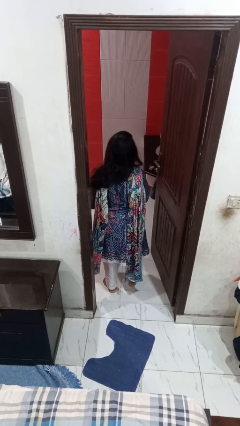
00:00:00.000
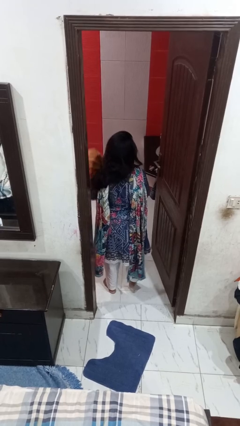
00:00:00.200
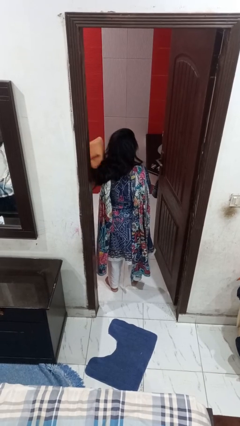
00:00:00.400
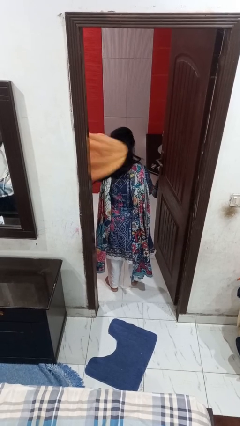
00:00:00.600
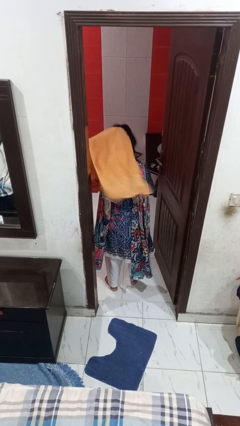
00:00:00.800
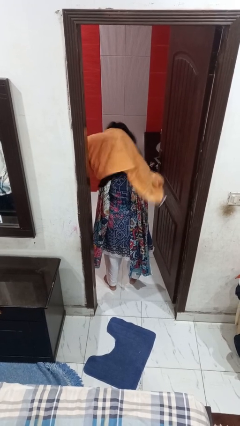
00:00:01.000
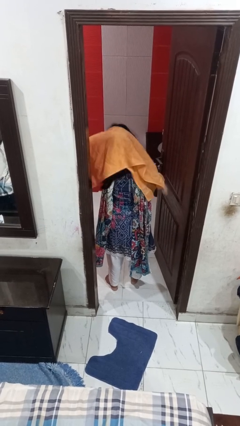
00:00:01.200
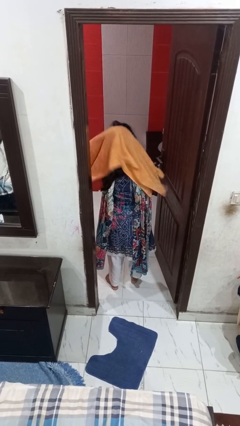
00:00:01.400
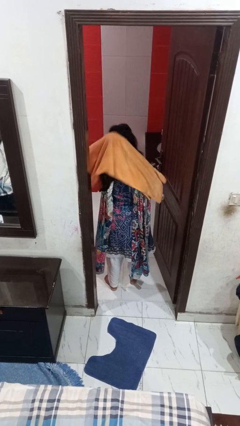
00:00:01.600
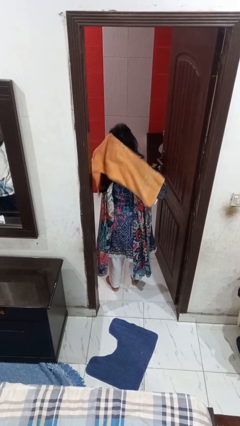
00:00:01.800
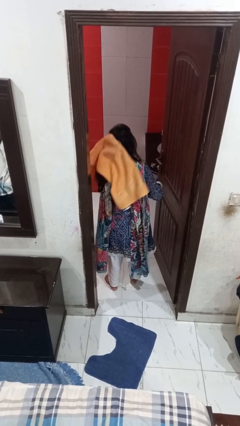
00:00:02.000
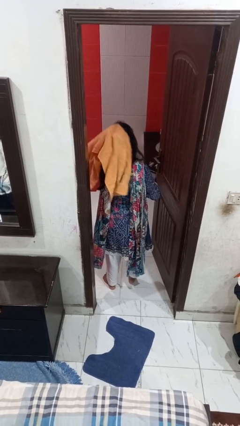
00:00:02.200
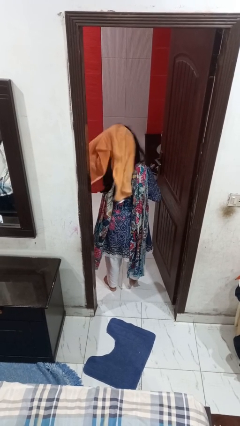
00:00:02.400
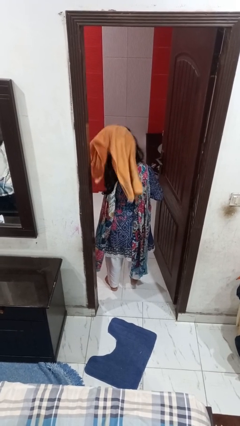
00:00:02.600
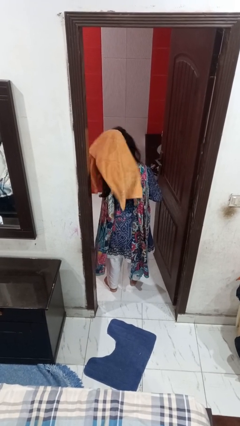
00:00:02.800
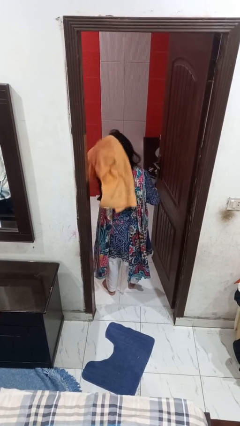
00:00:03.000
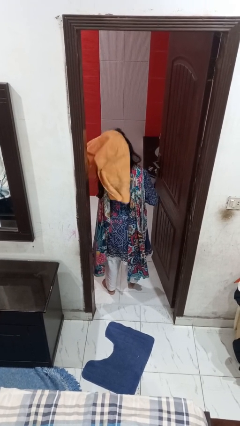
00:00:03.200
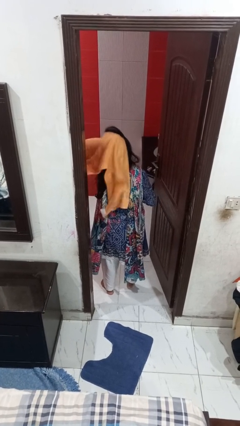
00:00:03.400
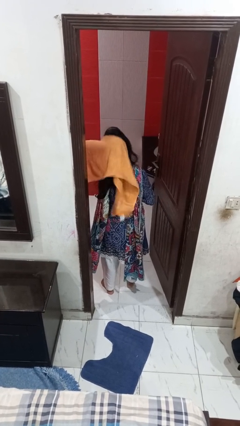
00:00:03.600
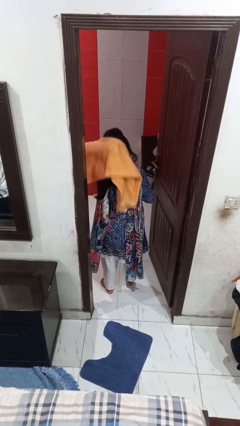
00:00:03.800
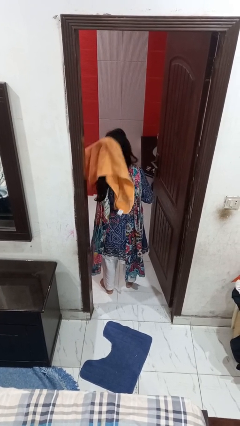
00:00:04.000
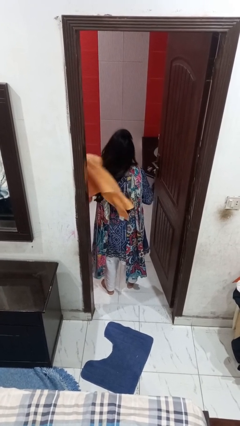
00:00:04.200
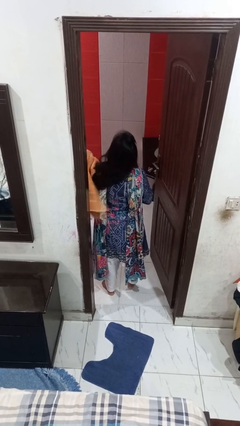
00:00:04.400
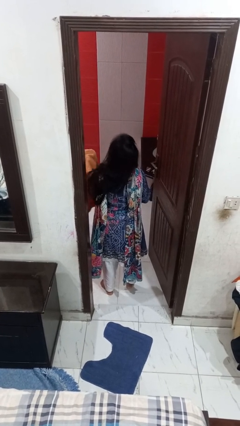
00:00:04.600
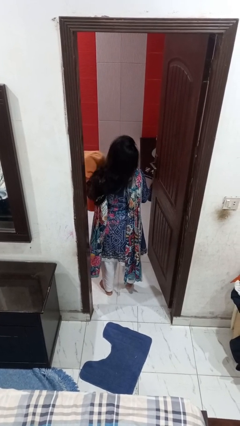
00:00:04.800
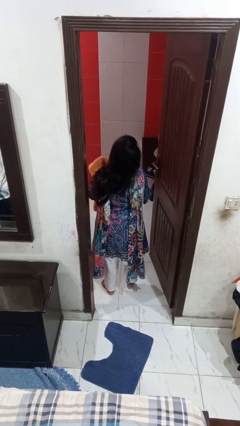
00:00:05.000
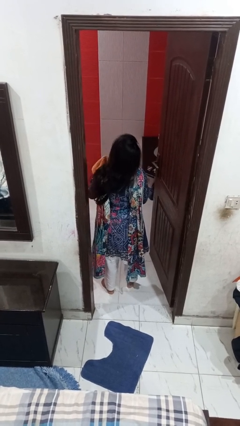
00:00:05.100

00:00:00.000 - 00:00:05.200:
person dries hair with towel

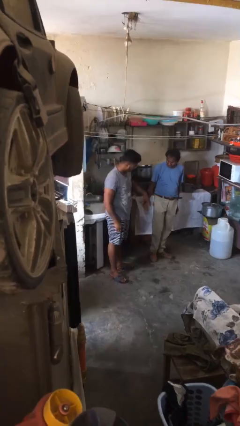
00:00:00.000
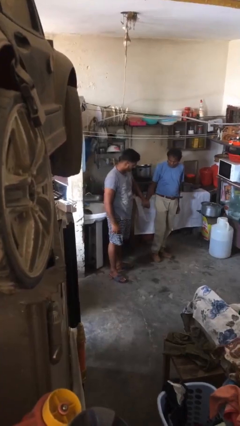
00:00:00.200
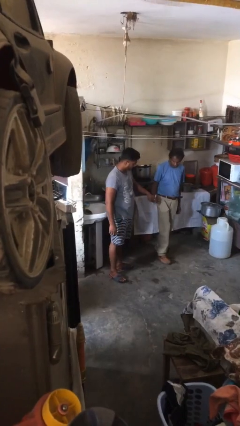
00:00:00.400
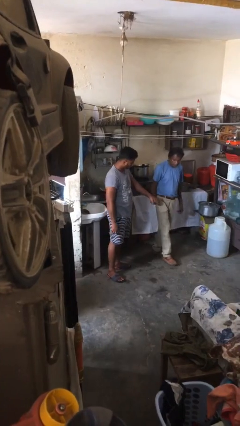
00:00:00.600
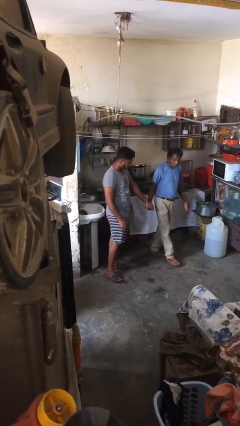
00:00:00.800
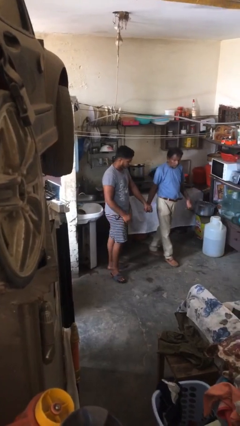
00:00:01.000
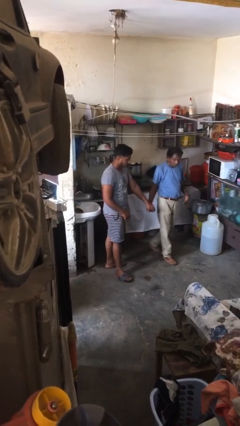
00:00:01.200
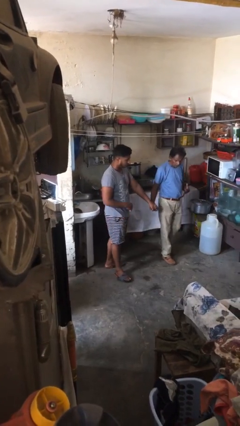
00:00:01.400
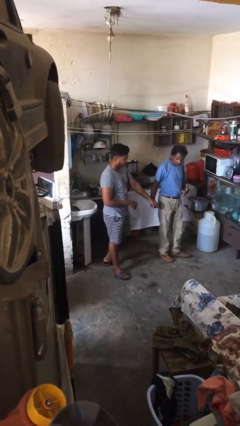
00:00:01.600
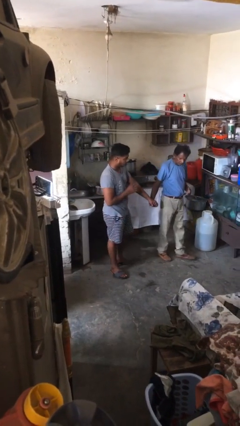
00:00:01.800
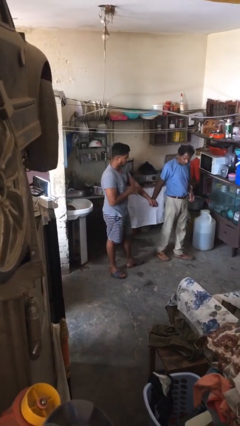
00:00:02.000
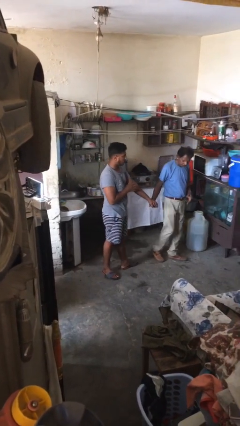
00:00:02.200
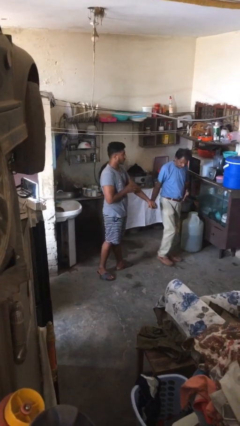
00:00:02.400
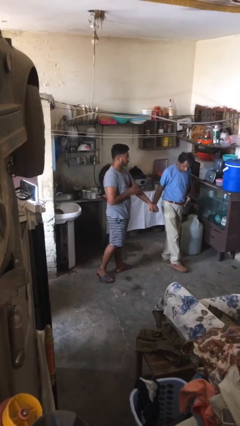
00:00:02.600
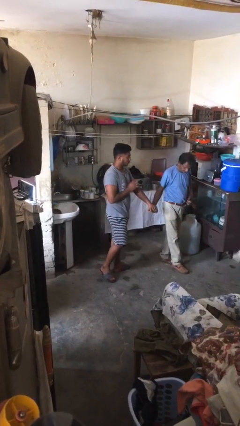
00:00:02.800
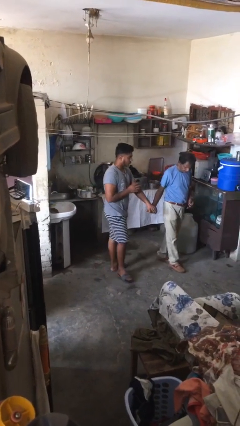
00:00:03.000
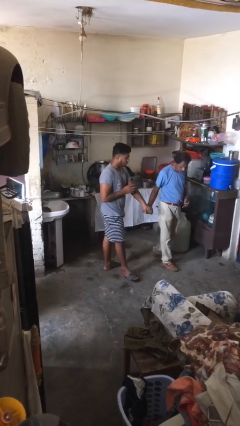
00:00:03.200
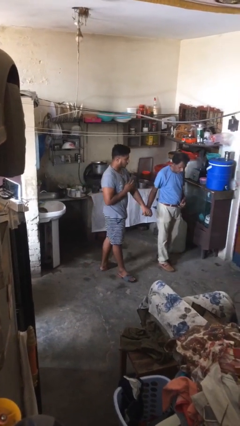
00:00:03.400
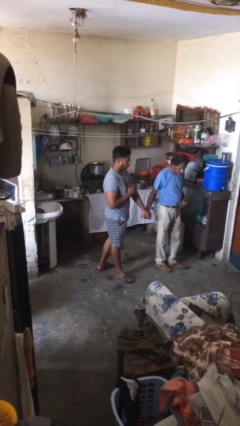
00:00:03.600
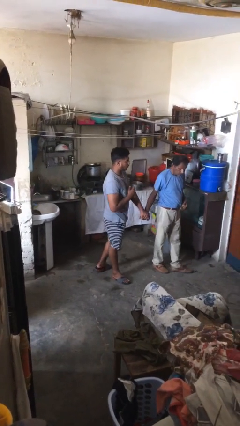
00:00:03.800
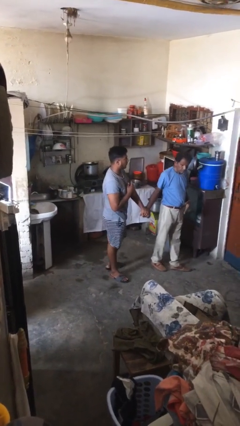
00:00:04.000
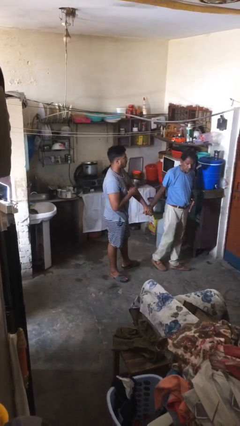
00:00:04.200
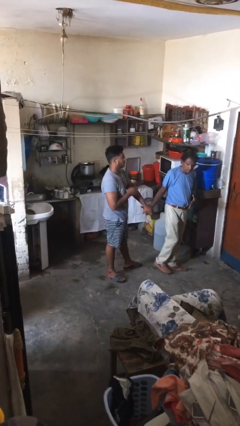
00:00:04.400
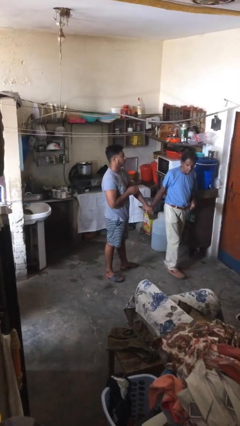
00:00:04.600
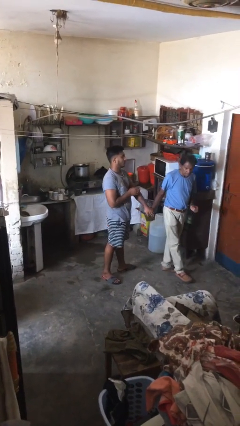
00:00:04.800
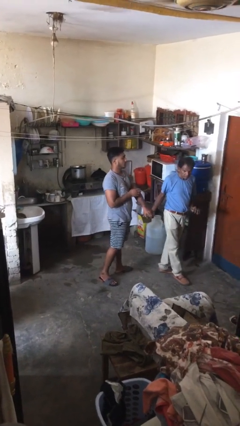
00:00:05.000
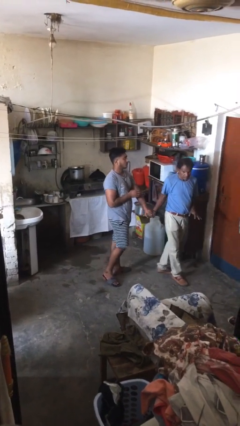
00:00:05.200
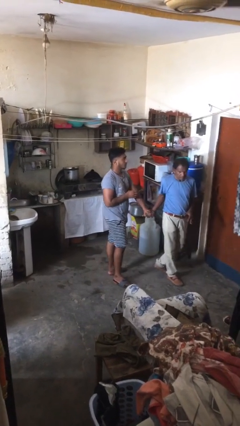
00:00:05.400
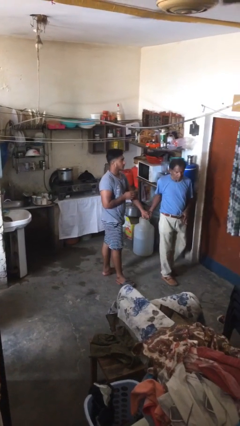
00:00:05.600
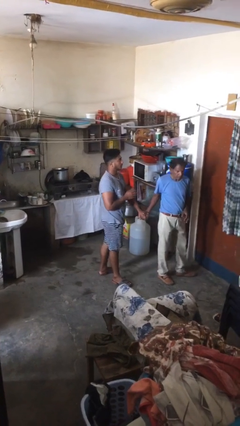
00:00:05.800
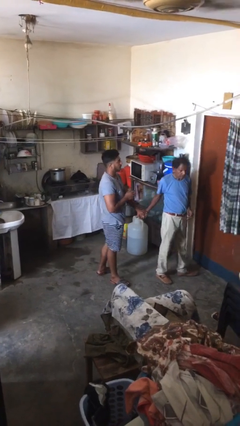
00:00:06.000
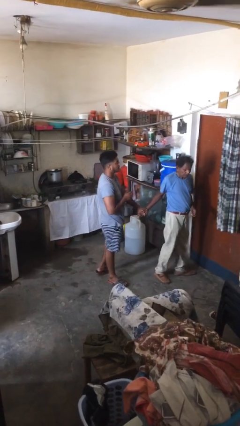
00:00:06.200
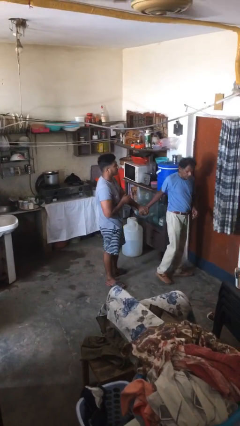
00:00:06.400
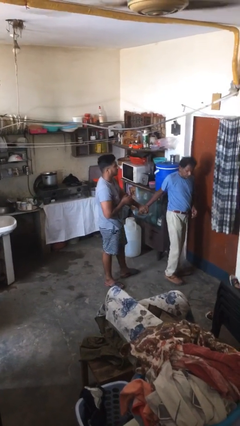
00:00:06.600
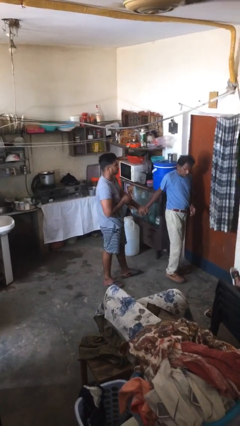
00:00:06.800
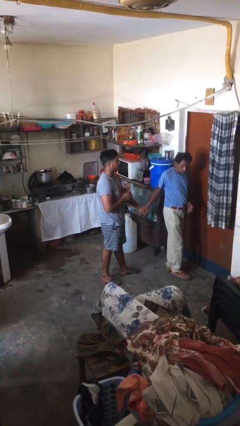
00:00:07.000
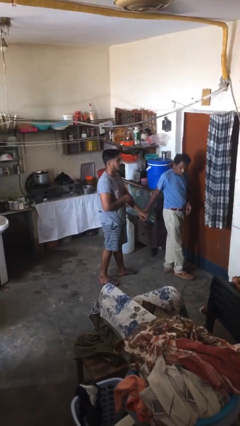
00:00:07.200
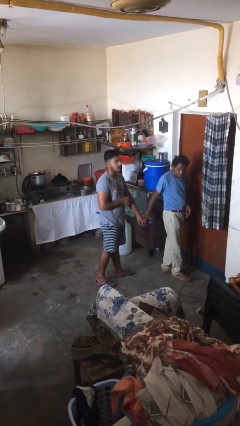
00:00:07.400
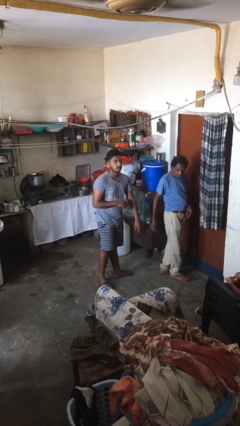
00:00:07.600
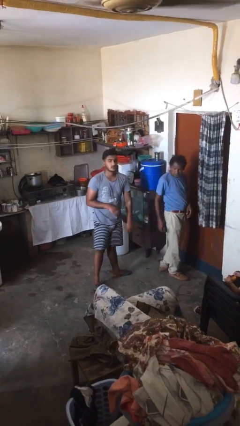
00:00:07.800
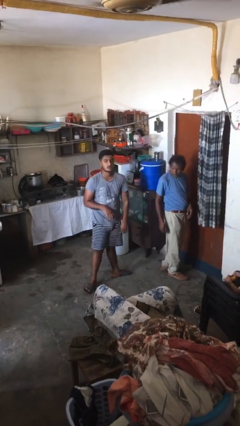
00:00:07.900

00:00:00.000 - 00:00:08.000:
person holds hand

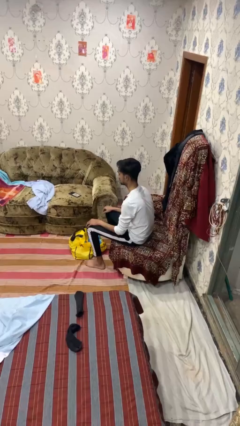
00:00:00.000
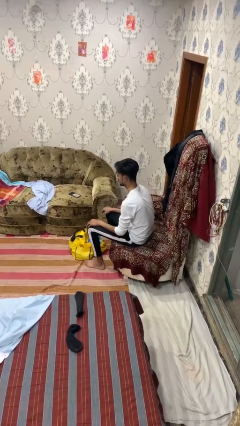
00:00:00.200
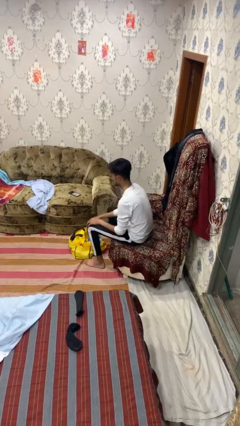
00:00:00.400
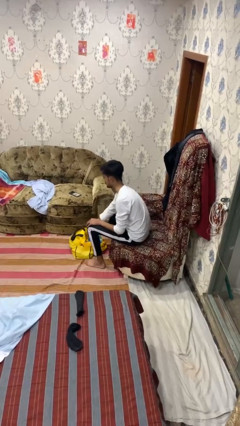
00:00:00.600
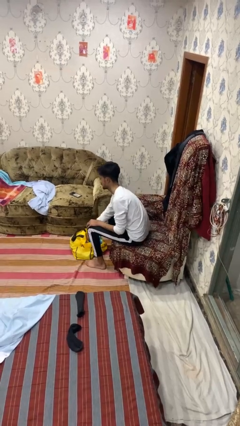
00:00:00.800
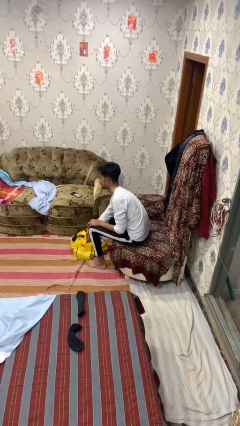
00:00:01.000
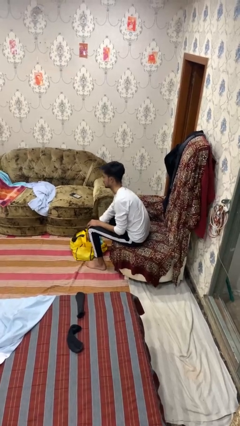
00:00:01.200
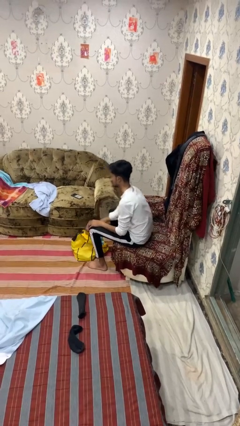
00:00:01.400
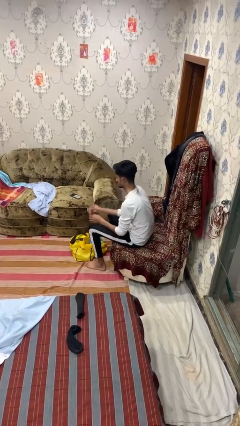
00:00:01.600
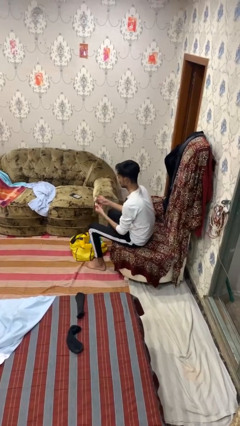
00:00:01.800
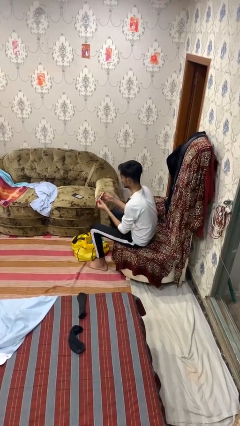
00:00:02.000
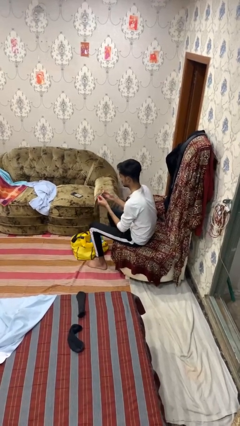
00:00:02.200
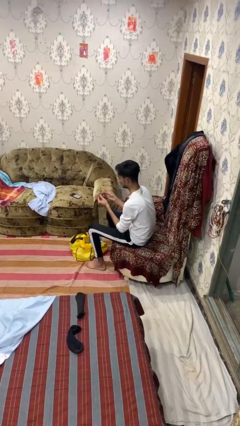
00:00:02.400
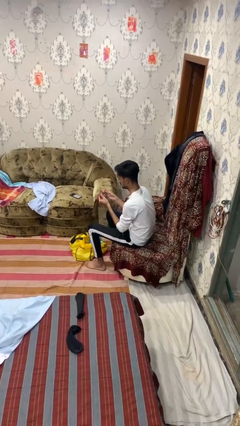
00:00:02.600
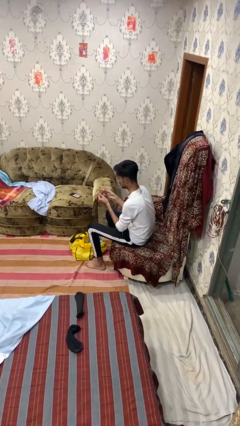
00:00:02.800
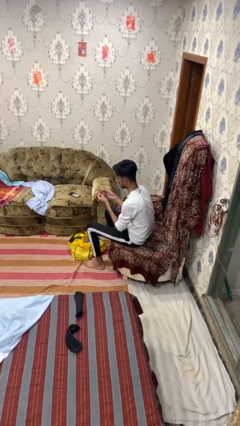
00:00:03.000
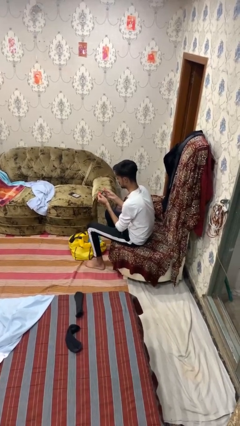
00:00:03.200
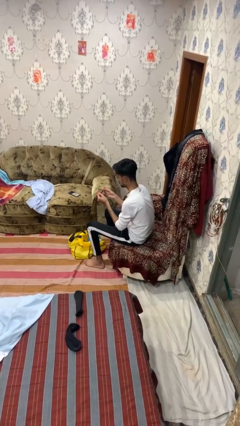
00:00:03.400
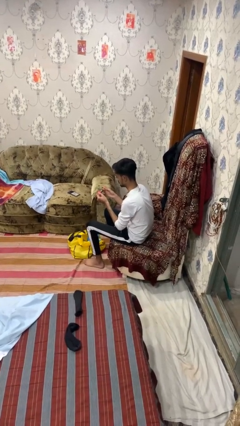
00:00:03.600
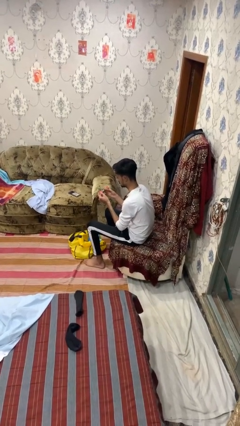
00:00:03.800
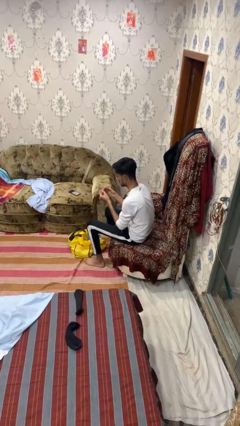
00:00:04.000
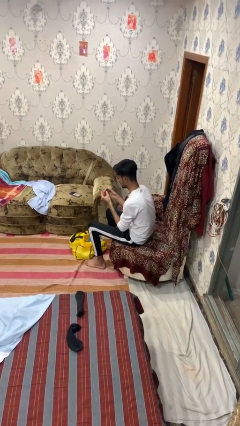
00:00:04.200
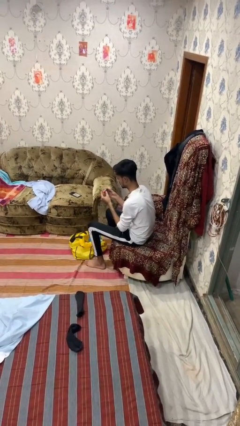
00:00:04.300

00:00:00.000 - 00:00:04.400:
person takes object from bag

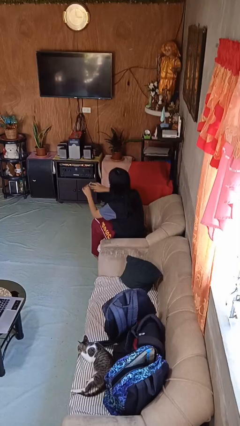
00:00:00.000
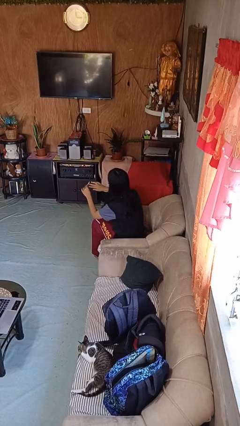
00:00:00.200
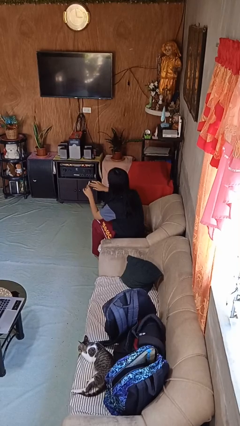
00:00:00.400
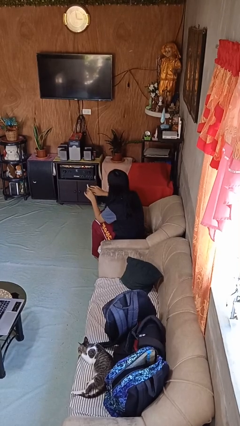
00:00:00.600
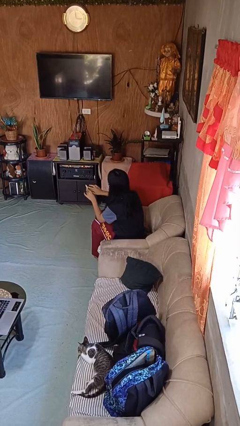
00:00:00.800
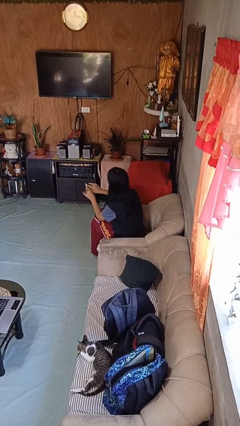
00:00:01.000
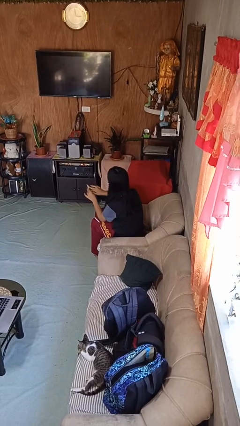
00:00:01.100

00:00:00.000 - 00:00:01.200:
person files fingernails
